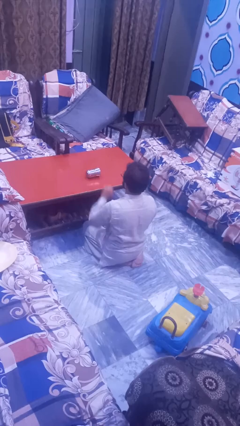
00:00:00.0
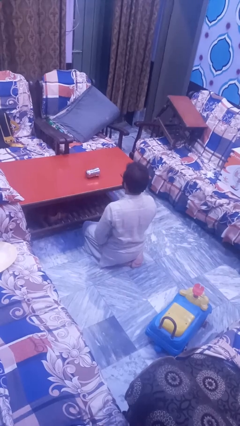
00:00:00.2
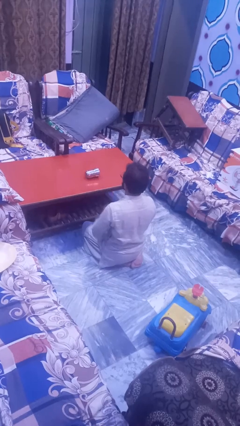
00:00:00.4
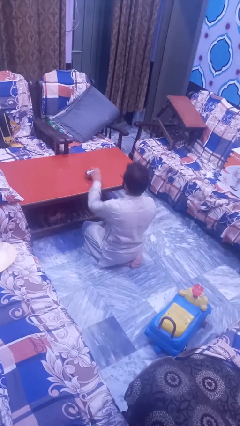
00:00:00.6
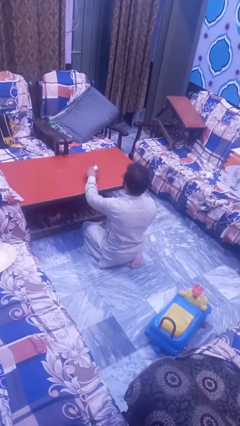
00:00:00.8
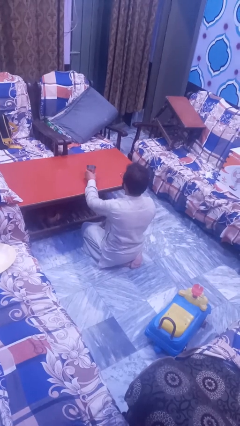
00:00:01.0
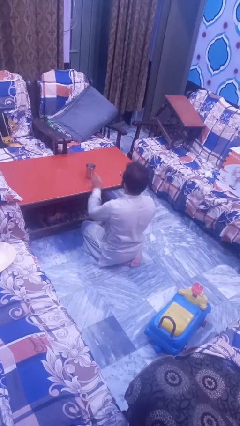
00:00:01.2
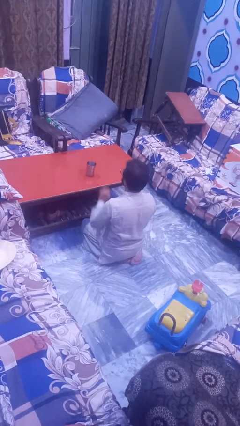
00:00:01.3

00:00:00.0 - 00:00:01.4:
person sets upright glass

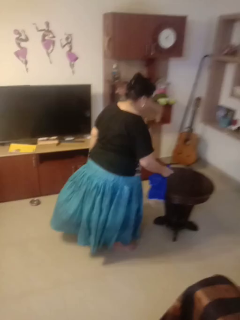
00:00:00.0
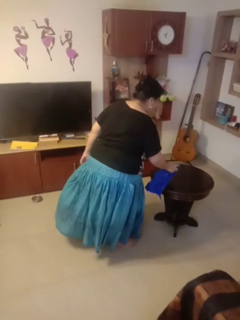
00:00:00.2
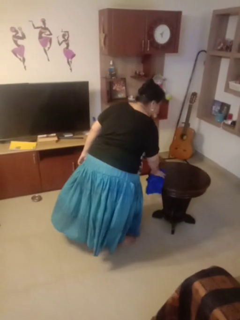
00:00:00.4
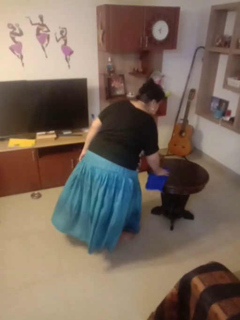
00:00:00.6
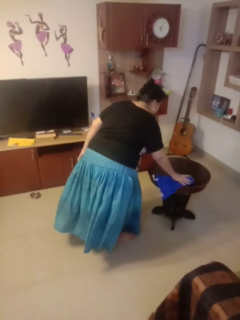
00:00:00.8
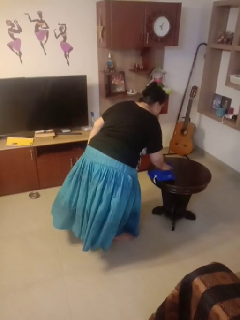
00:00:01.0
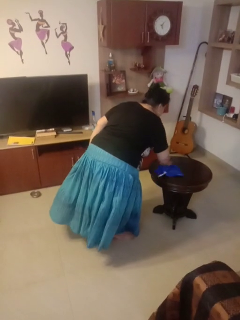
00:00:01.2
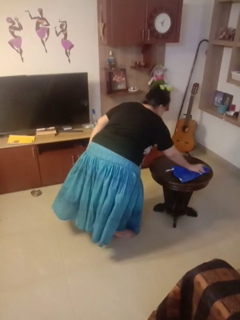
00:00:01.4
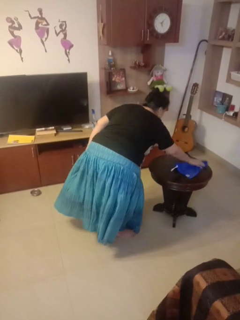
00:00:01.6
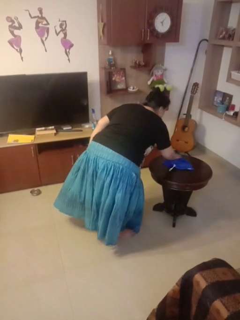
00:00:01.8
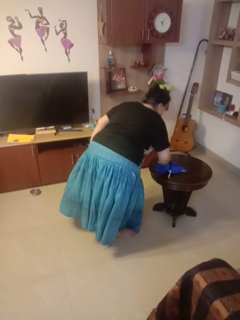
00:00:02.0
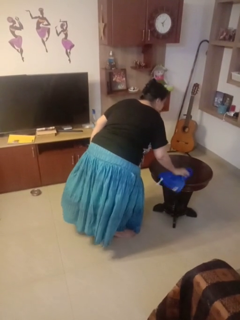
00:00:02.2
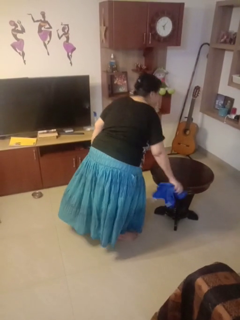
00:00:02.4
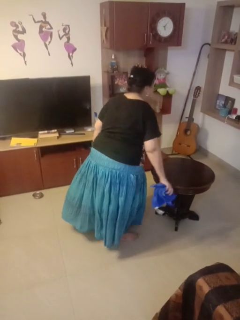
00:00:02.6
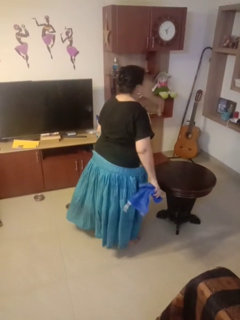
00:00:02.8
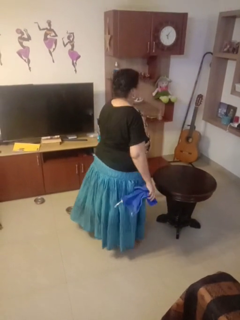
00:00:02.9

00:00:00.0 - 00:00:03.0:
person cleans table with rag

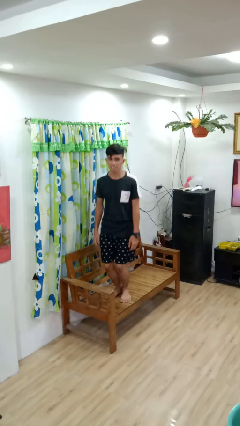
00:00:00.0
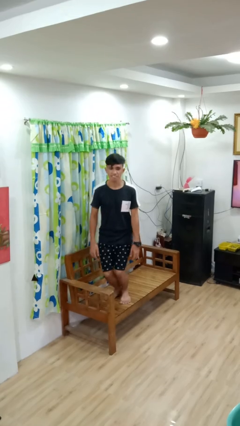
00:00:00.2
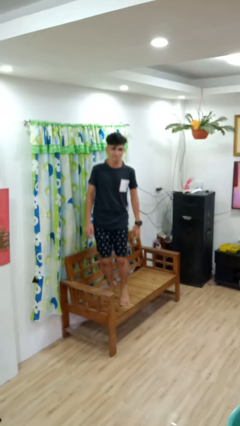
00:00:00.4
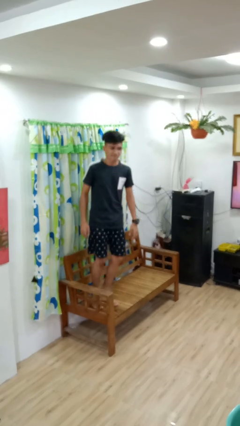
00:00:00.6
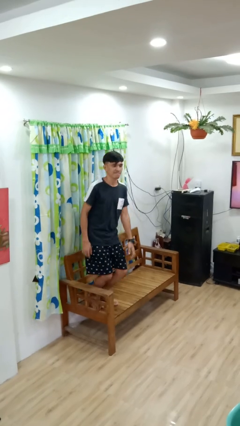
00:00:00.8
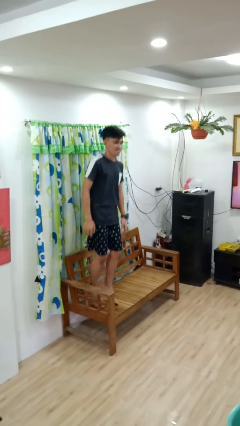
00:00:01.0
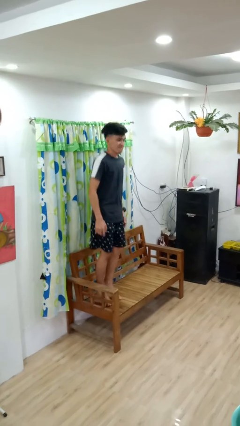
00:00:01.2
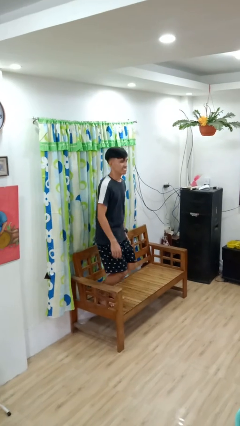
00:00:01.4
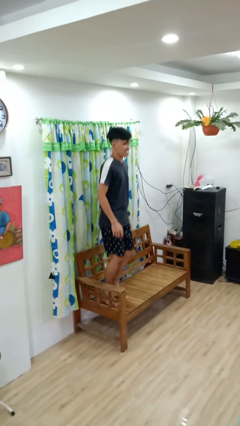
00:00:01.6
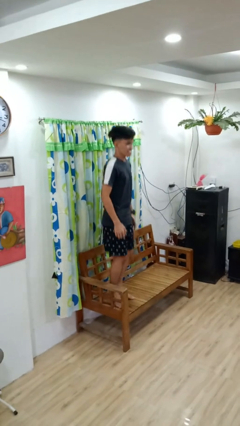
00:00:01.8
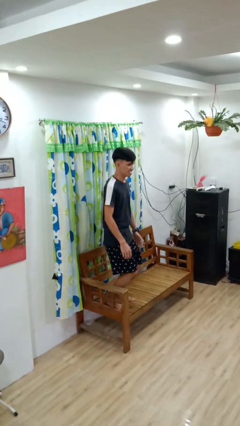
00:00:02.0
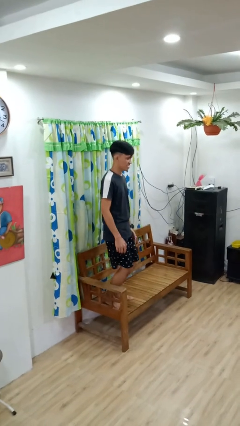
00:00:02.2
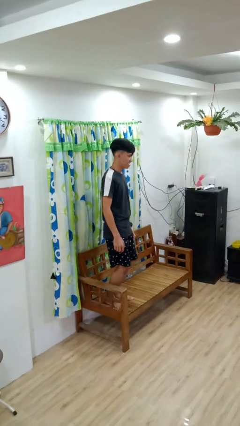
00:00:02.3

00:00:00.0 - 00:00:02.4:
person jumps on couch

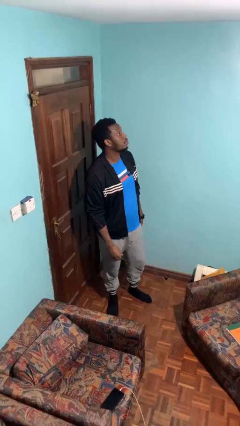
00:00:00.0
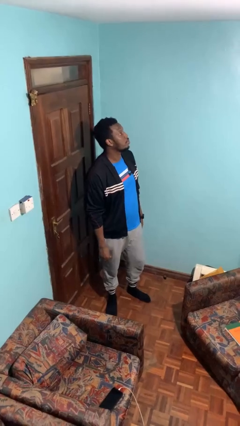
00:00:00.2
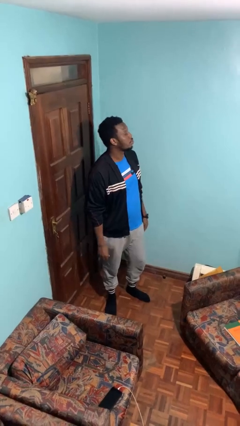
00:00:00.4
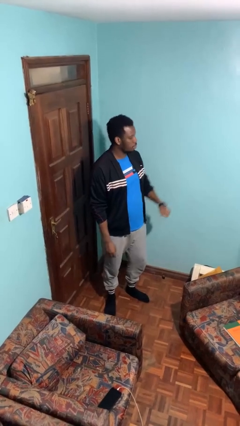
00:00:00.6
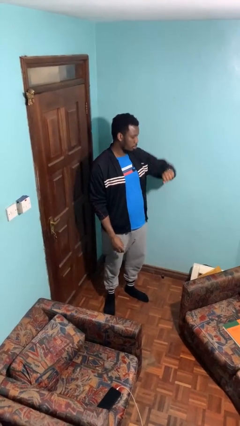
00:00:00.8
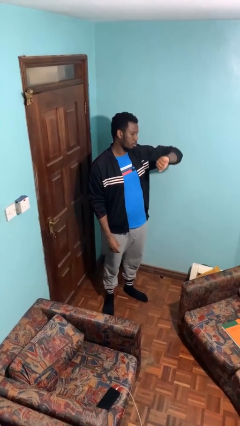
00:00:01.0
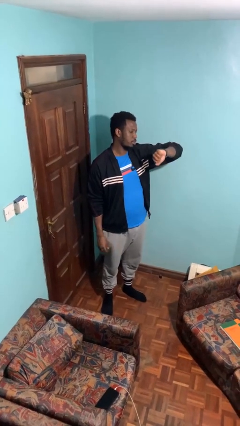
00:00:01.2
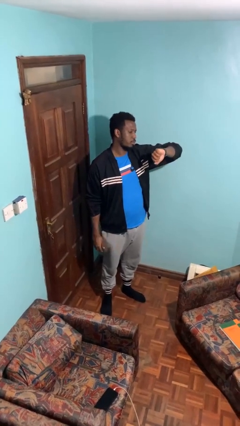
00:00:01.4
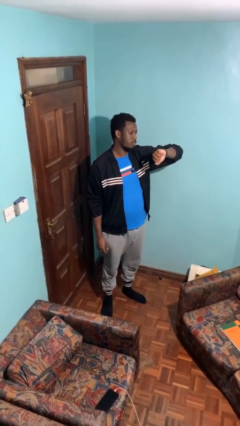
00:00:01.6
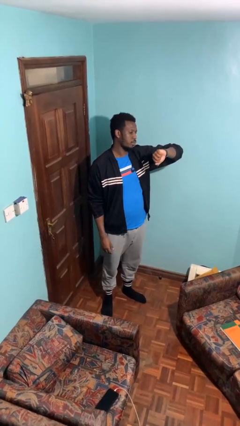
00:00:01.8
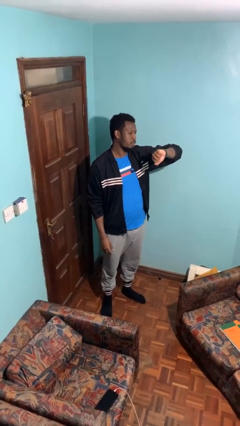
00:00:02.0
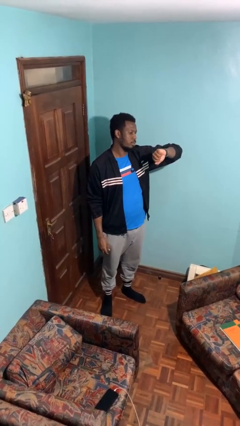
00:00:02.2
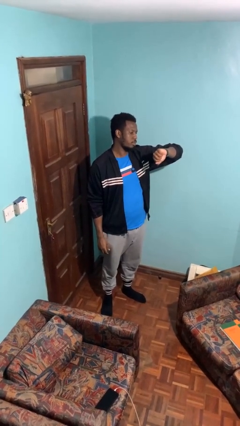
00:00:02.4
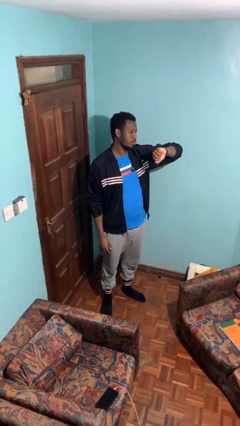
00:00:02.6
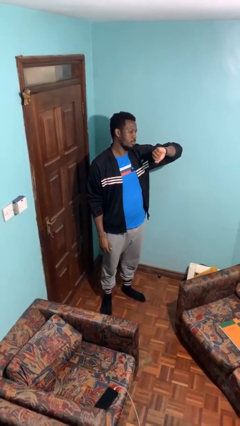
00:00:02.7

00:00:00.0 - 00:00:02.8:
person looks at wristwatch

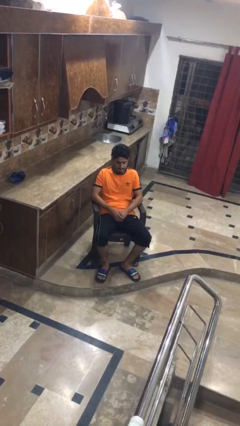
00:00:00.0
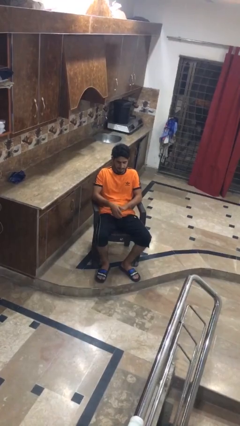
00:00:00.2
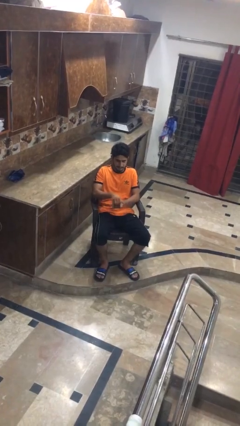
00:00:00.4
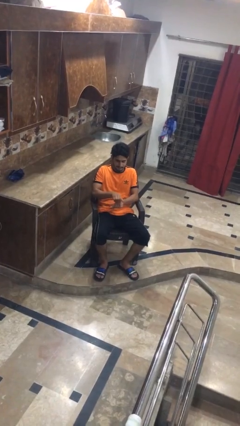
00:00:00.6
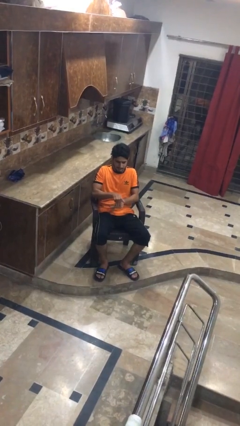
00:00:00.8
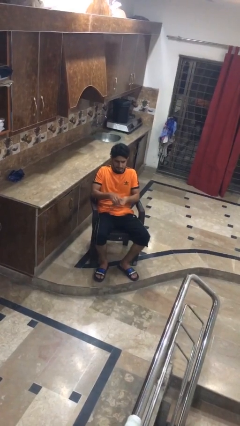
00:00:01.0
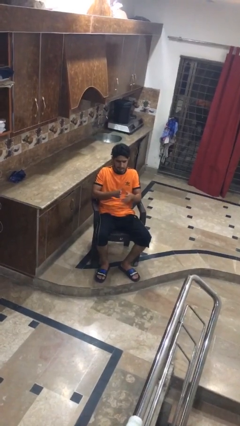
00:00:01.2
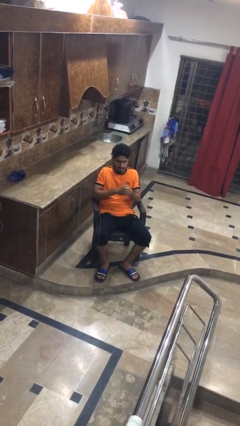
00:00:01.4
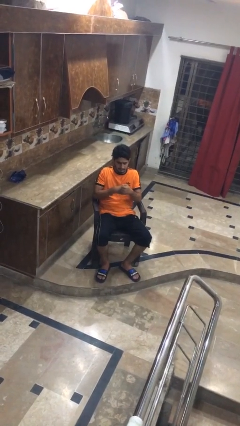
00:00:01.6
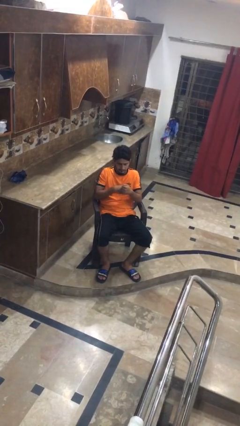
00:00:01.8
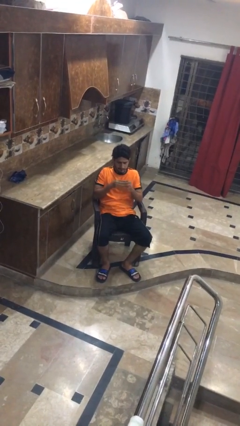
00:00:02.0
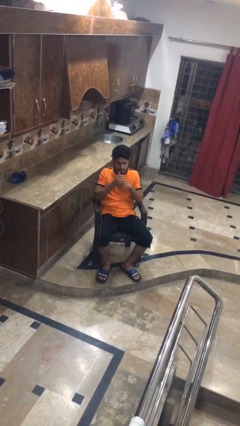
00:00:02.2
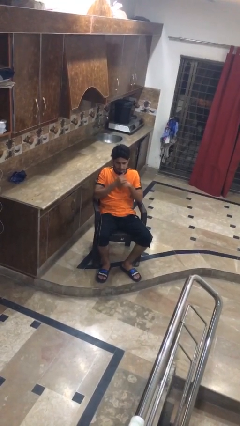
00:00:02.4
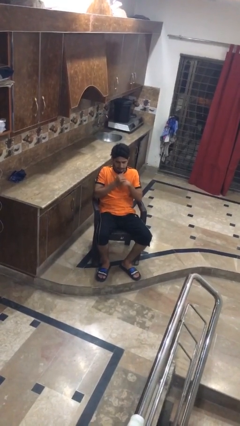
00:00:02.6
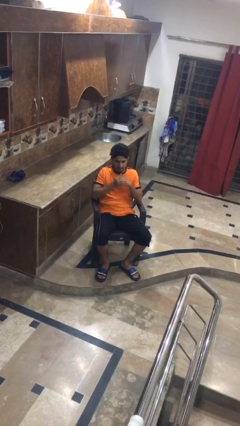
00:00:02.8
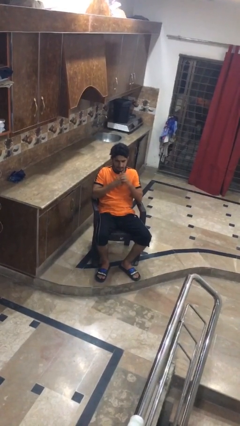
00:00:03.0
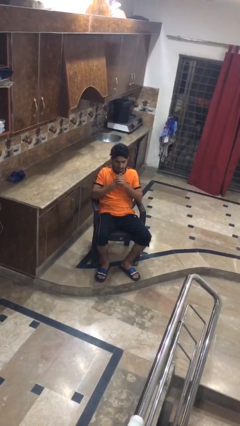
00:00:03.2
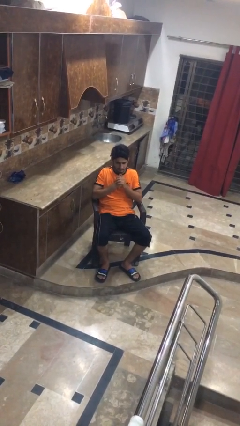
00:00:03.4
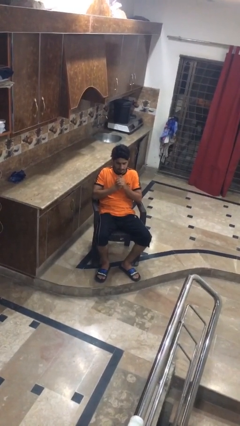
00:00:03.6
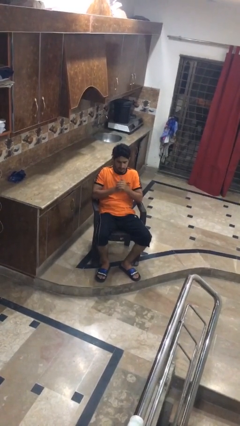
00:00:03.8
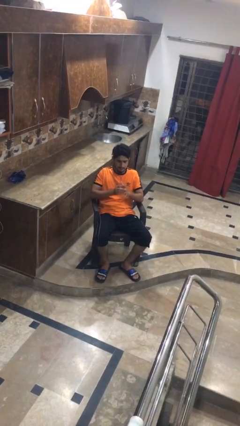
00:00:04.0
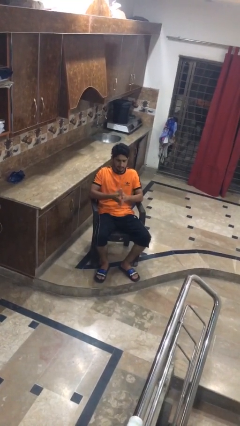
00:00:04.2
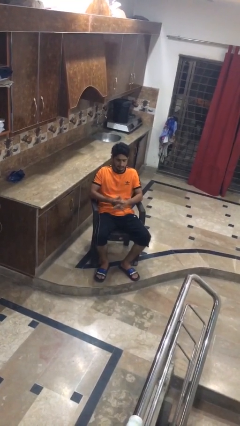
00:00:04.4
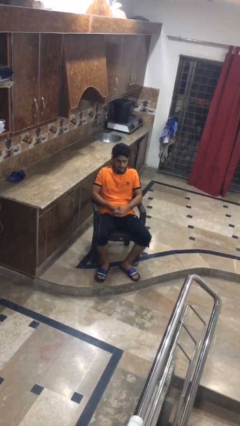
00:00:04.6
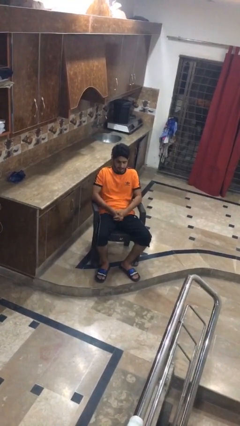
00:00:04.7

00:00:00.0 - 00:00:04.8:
person cracks knuckles

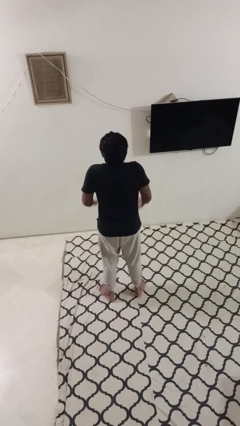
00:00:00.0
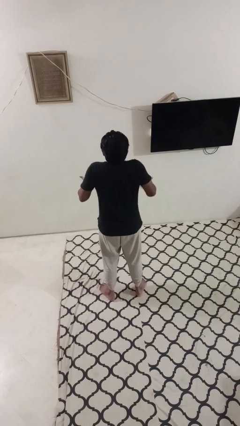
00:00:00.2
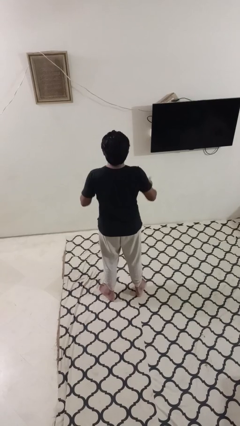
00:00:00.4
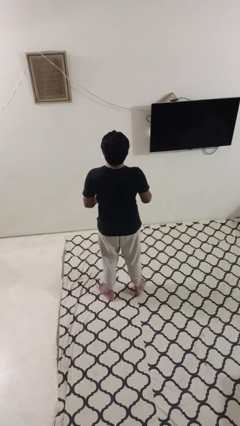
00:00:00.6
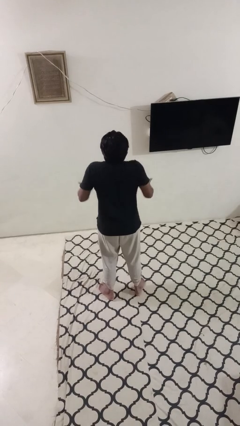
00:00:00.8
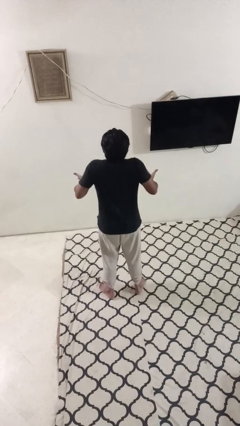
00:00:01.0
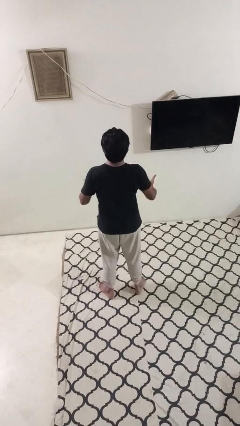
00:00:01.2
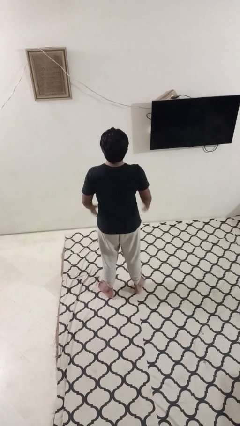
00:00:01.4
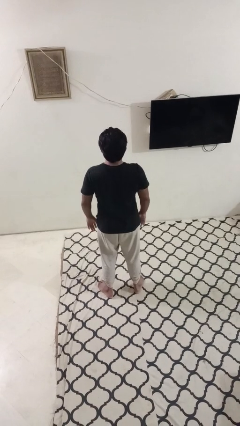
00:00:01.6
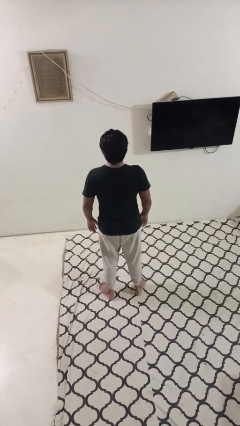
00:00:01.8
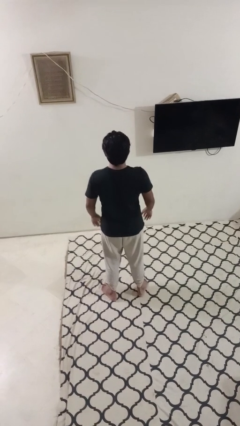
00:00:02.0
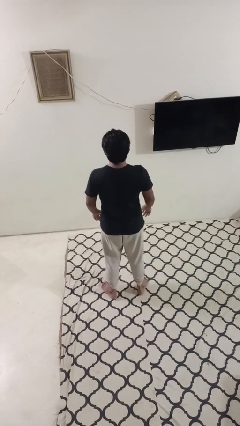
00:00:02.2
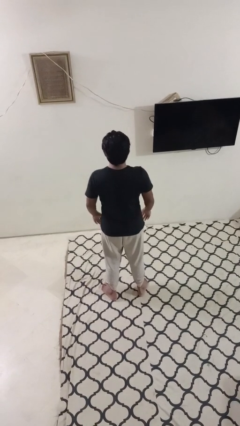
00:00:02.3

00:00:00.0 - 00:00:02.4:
person shrugs

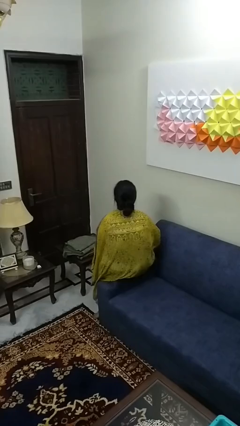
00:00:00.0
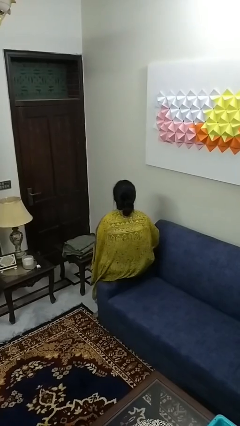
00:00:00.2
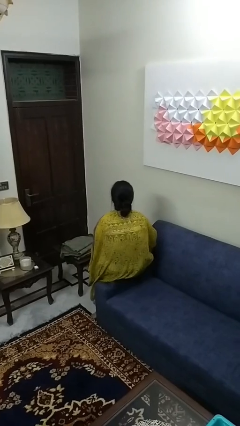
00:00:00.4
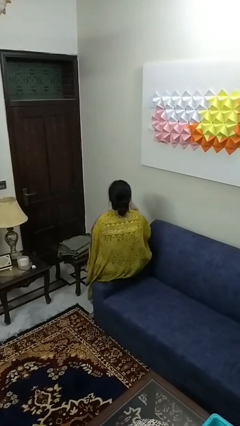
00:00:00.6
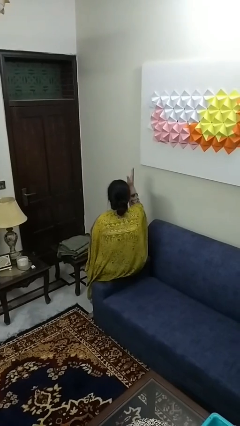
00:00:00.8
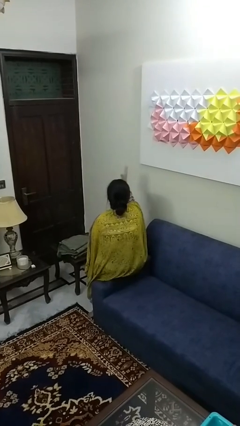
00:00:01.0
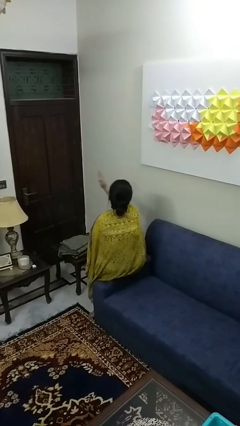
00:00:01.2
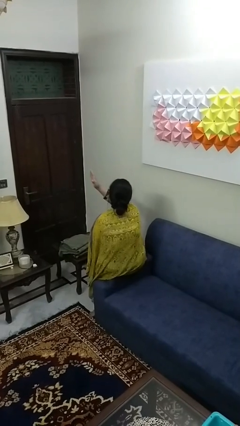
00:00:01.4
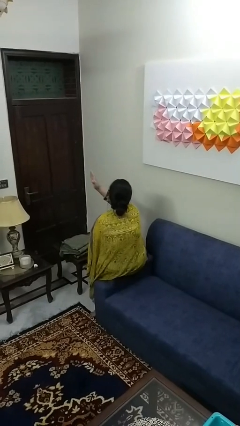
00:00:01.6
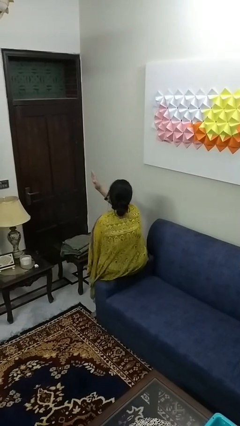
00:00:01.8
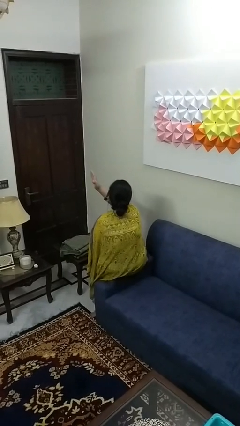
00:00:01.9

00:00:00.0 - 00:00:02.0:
person gestures swipe left
